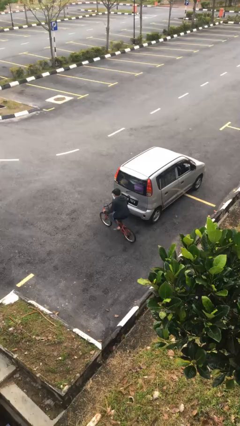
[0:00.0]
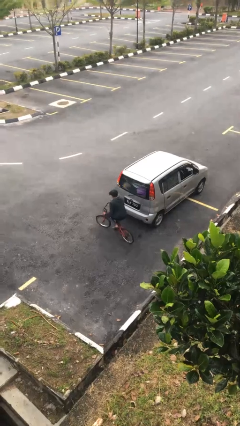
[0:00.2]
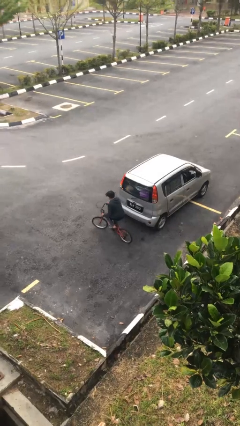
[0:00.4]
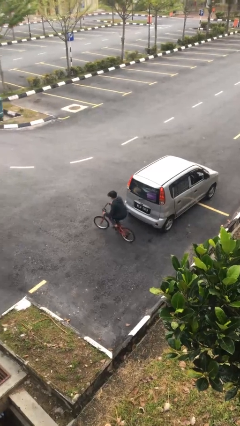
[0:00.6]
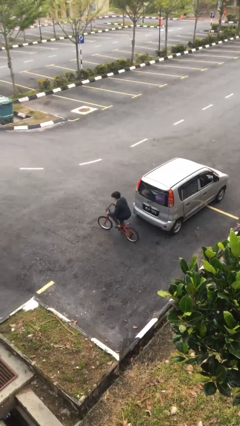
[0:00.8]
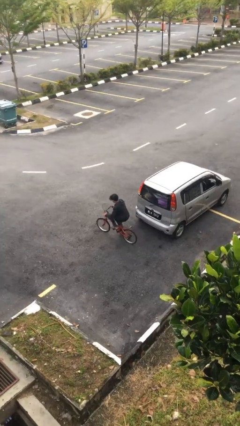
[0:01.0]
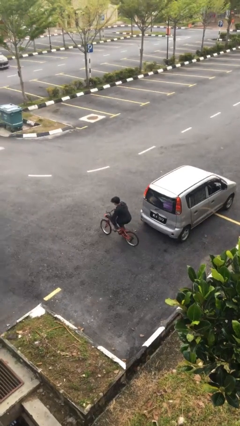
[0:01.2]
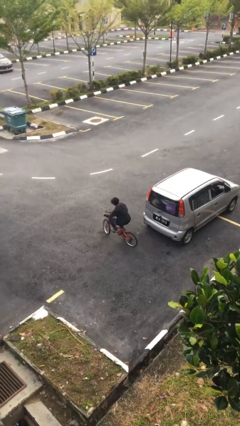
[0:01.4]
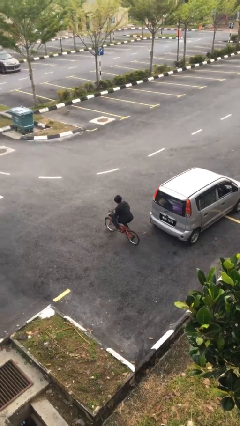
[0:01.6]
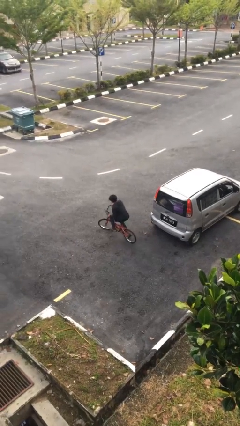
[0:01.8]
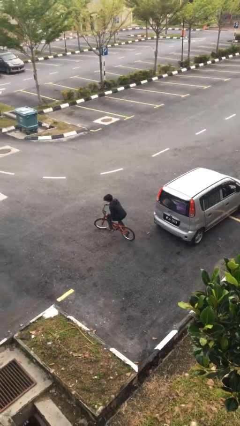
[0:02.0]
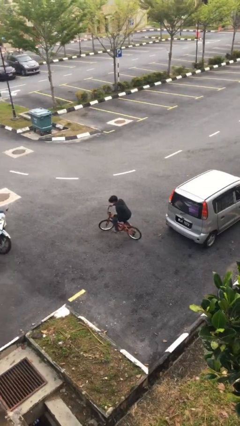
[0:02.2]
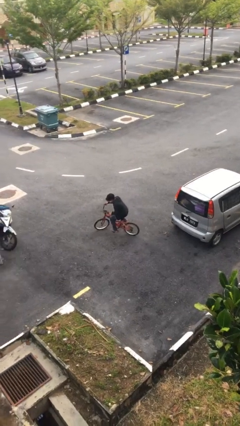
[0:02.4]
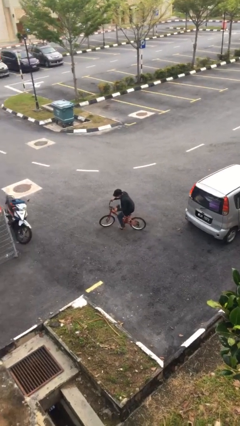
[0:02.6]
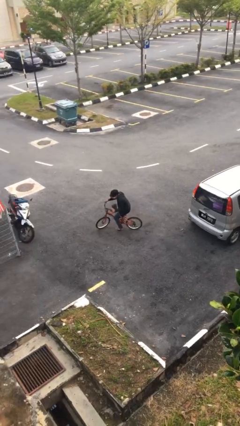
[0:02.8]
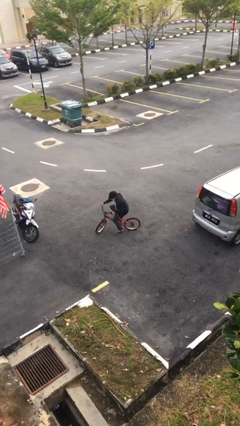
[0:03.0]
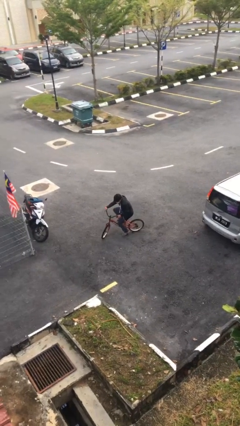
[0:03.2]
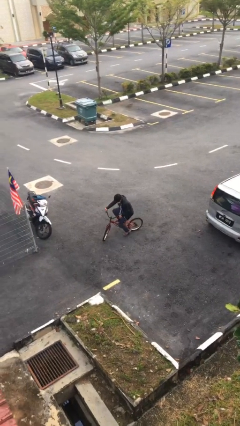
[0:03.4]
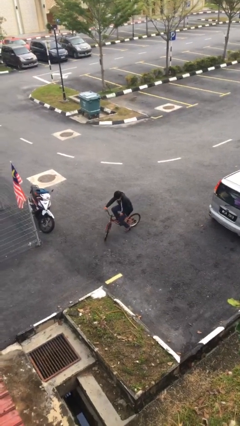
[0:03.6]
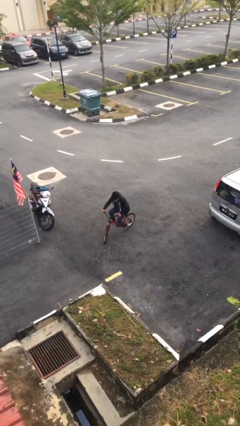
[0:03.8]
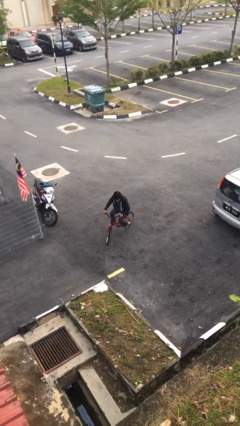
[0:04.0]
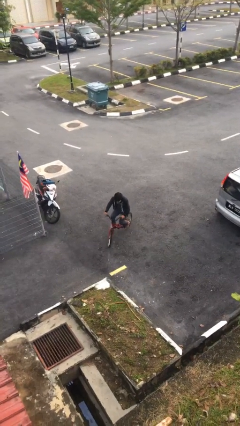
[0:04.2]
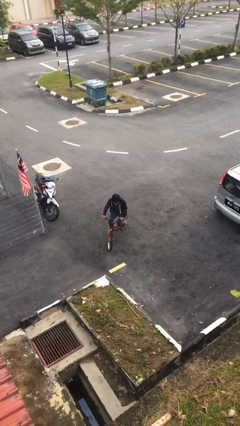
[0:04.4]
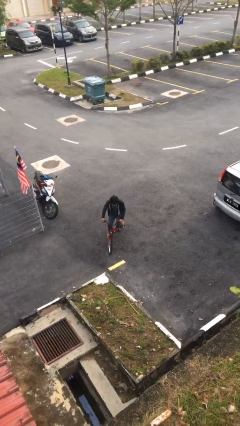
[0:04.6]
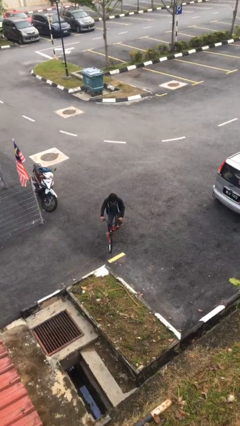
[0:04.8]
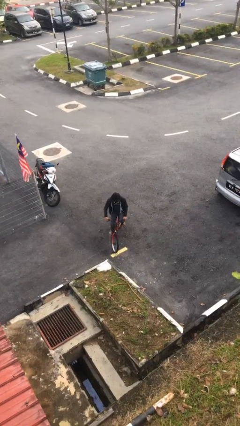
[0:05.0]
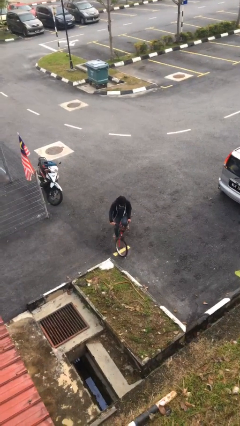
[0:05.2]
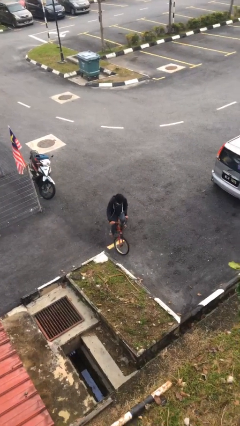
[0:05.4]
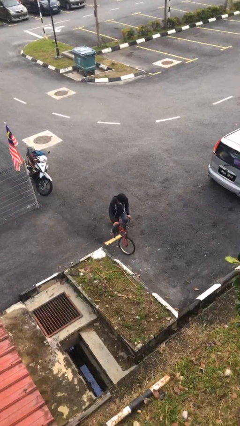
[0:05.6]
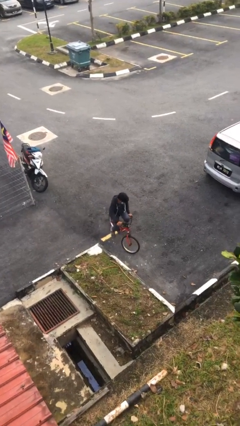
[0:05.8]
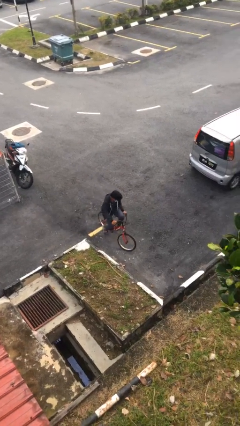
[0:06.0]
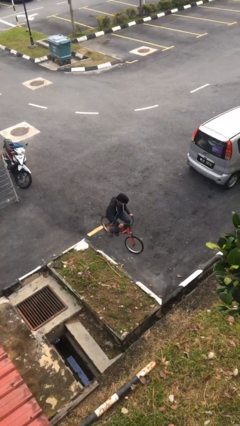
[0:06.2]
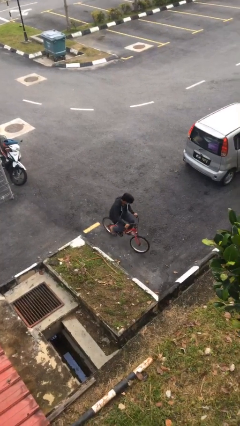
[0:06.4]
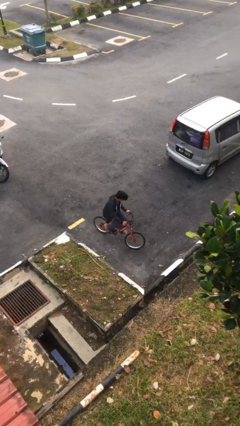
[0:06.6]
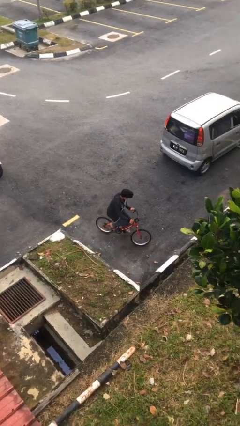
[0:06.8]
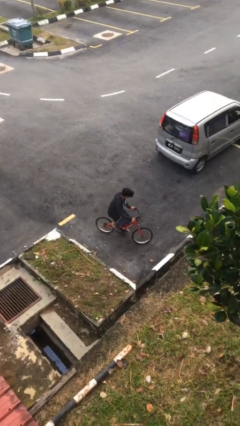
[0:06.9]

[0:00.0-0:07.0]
person rides bicycle

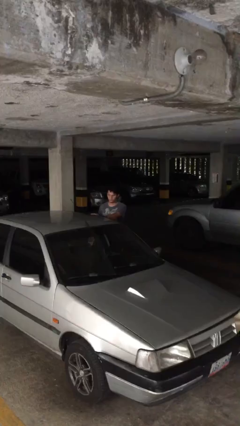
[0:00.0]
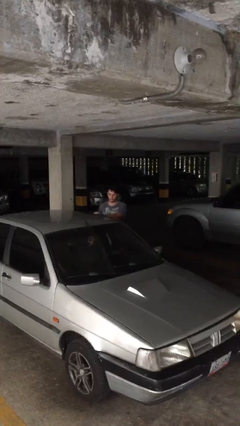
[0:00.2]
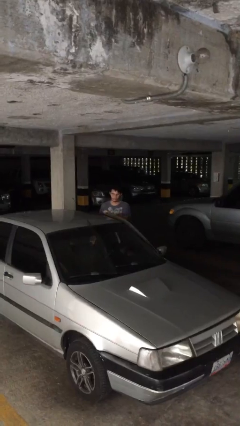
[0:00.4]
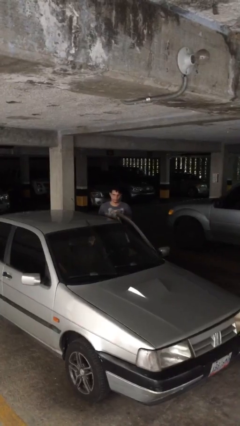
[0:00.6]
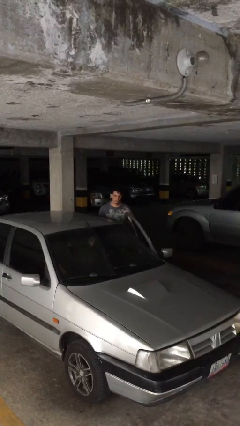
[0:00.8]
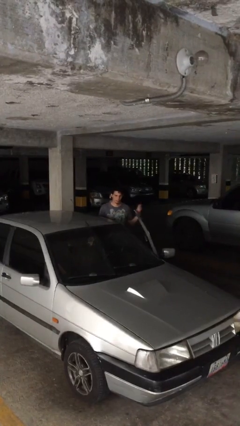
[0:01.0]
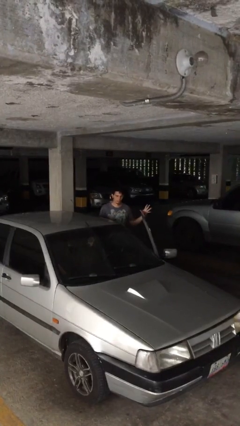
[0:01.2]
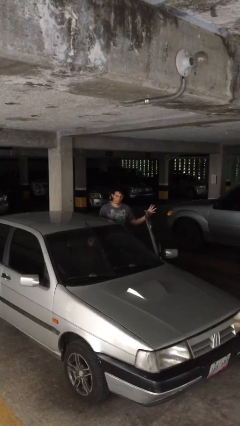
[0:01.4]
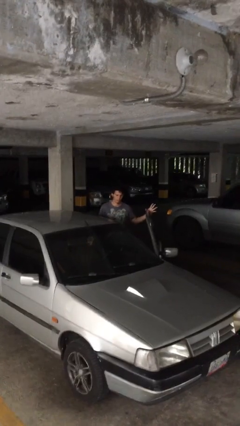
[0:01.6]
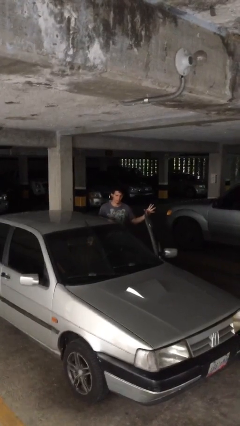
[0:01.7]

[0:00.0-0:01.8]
person opens car door

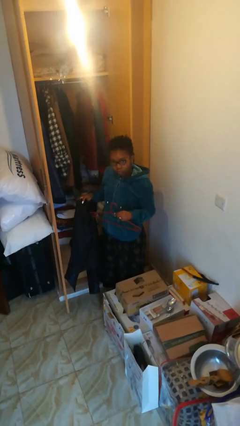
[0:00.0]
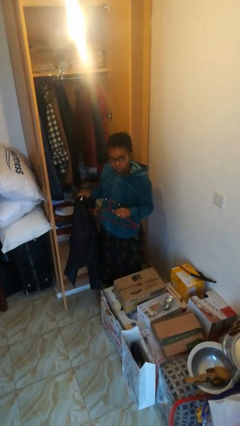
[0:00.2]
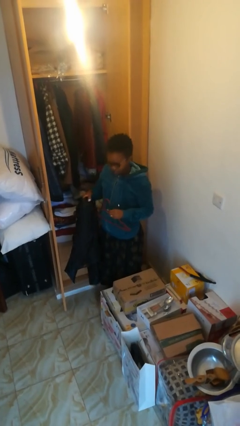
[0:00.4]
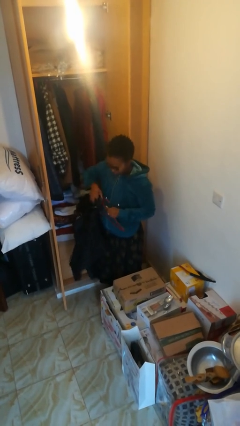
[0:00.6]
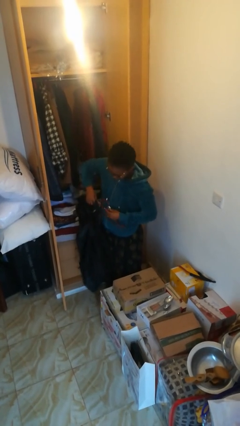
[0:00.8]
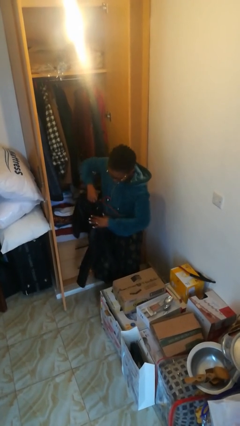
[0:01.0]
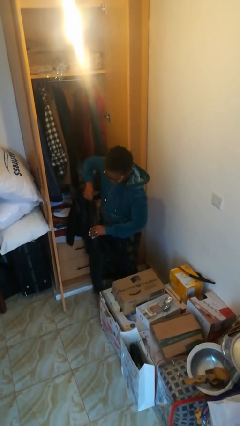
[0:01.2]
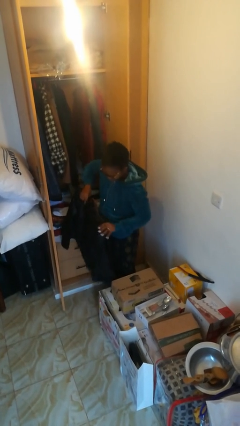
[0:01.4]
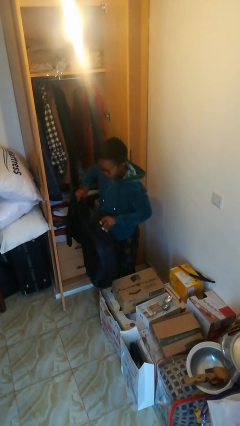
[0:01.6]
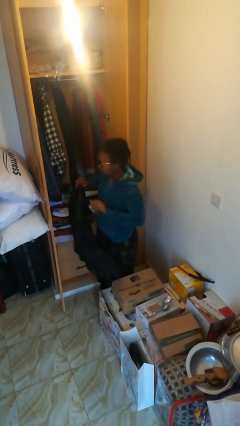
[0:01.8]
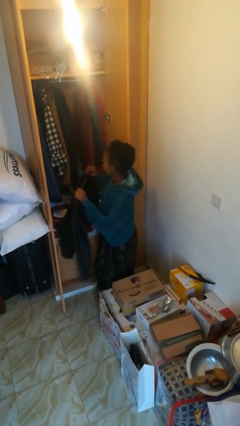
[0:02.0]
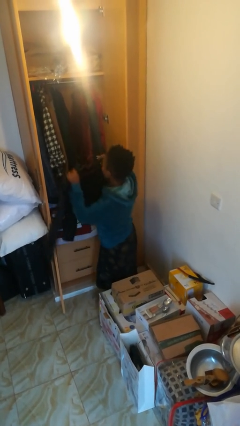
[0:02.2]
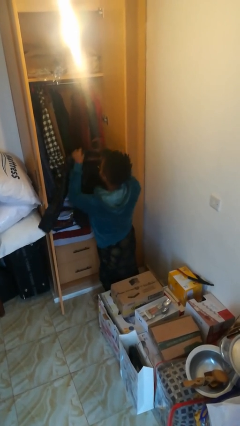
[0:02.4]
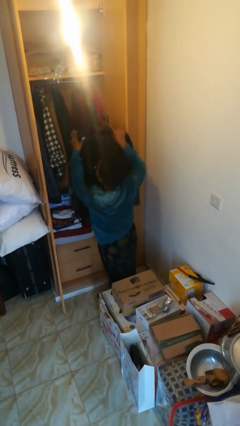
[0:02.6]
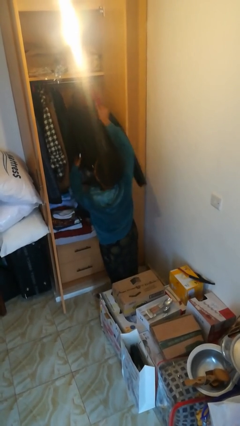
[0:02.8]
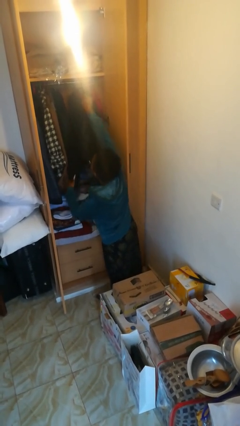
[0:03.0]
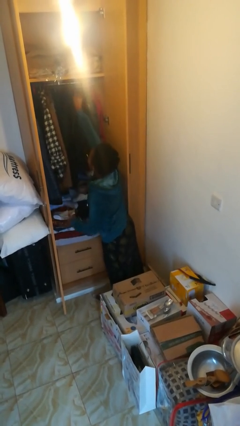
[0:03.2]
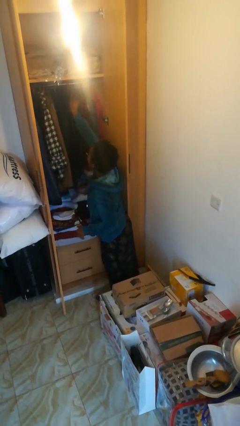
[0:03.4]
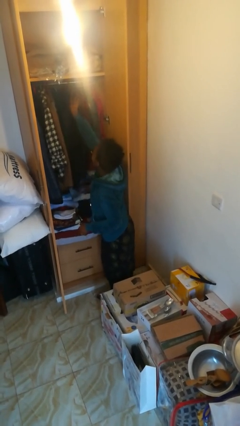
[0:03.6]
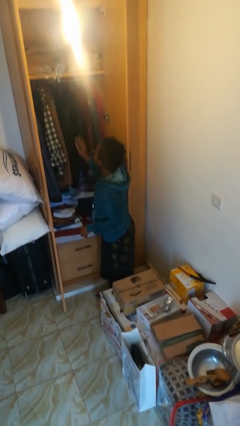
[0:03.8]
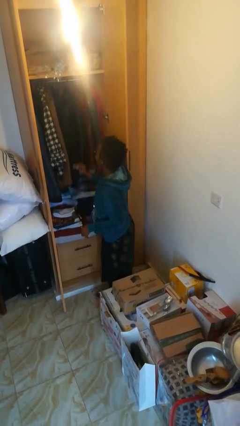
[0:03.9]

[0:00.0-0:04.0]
person puts clothes into closet

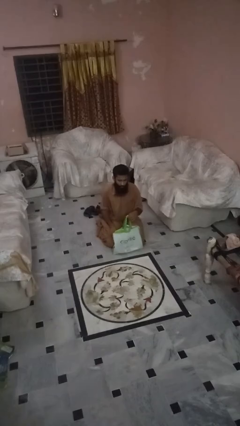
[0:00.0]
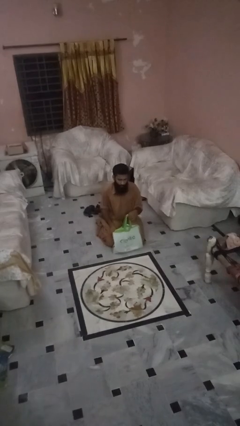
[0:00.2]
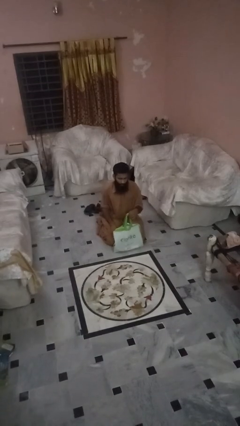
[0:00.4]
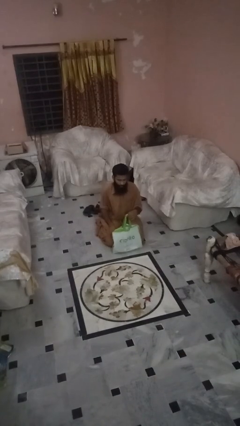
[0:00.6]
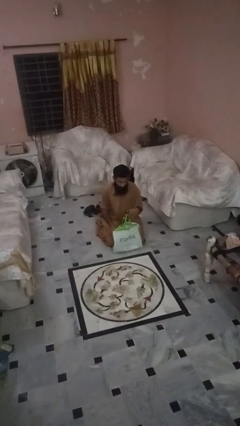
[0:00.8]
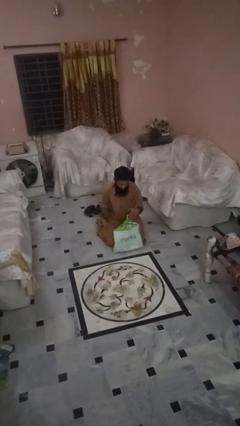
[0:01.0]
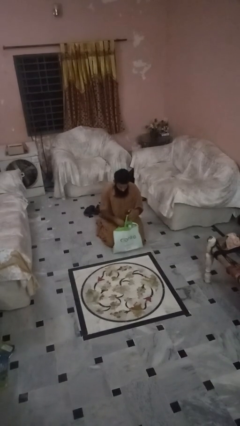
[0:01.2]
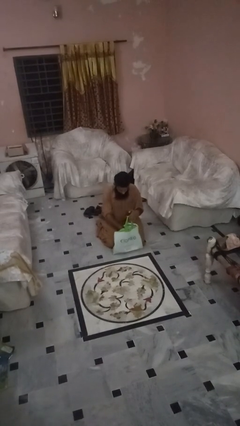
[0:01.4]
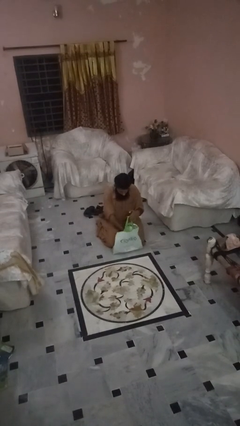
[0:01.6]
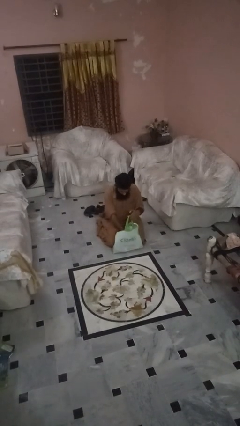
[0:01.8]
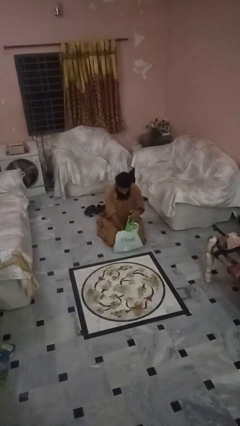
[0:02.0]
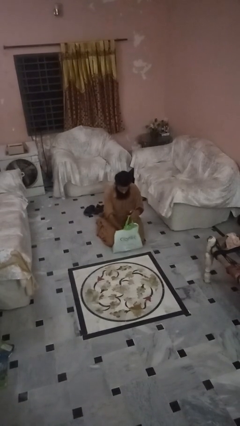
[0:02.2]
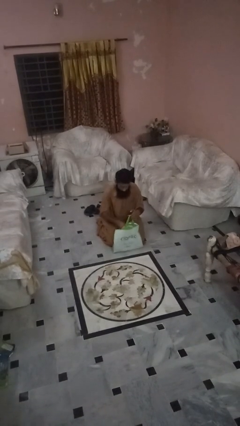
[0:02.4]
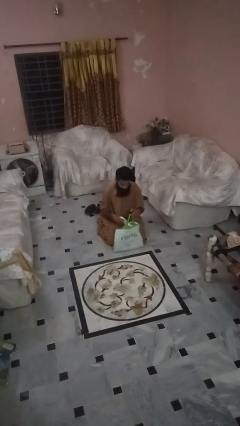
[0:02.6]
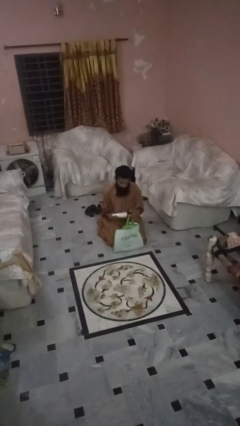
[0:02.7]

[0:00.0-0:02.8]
person takes object from bag

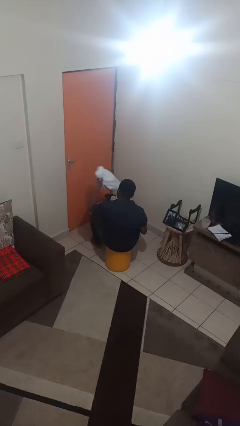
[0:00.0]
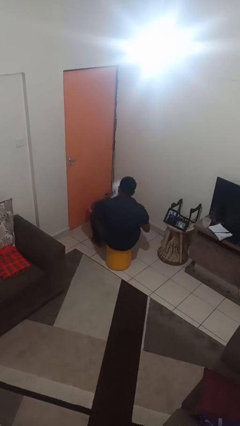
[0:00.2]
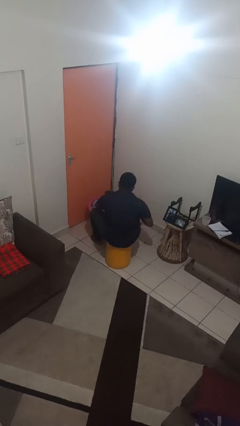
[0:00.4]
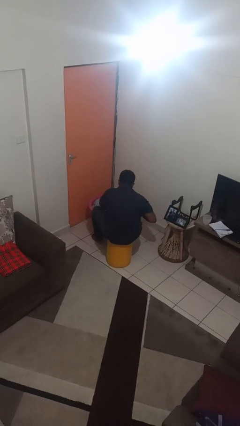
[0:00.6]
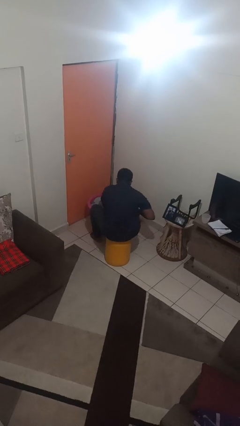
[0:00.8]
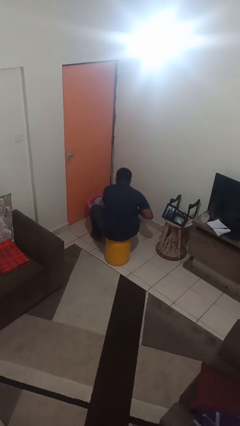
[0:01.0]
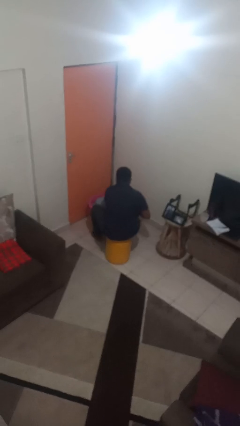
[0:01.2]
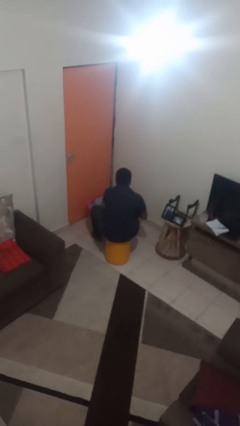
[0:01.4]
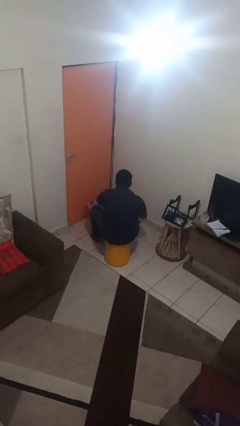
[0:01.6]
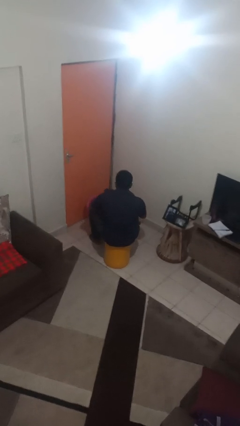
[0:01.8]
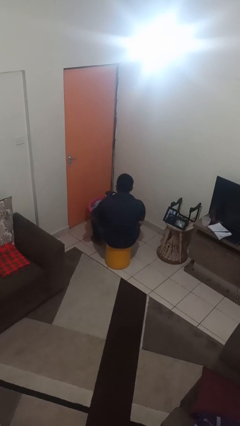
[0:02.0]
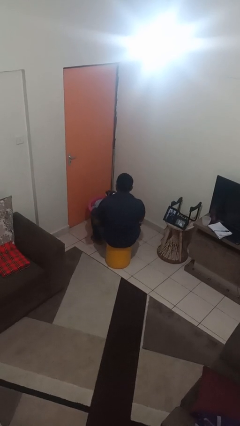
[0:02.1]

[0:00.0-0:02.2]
person puts object into basket
